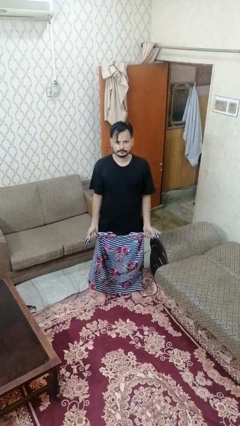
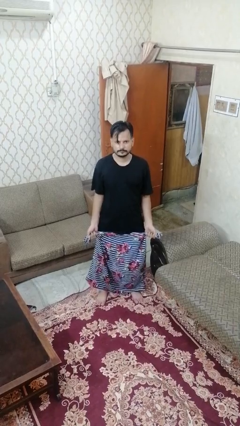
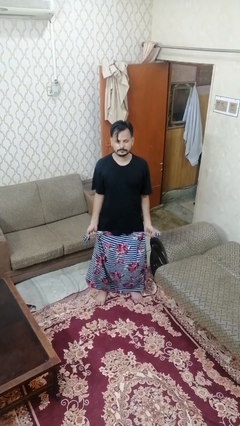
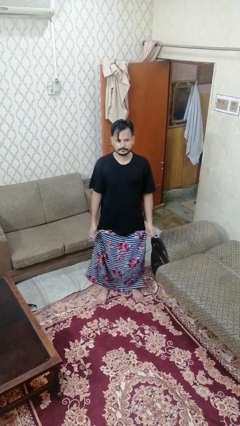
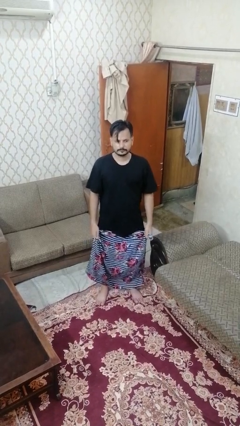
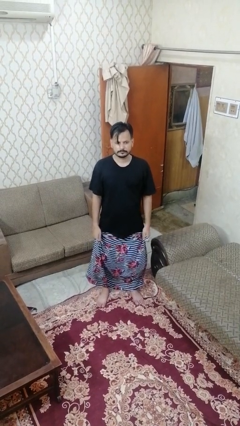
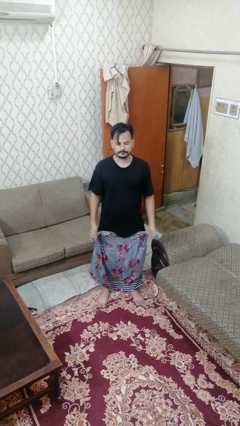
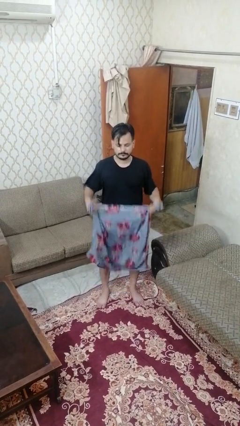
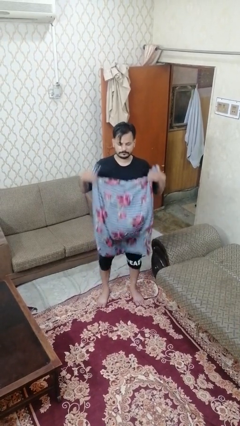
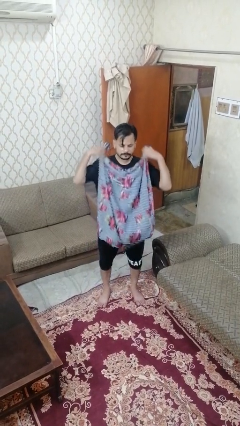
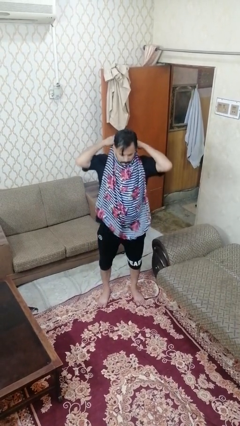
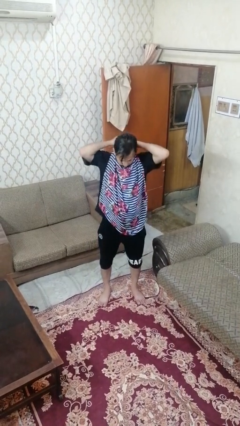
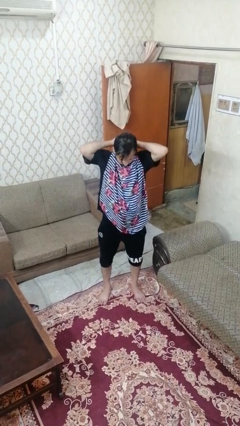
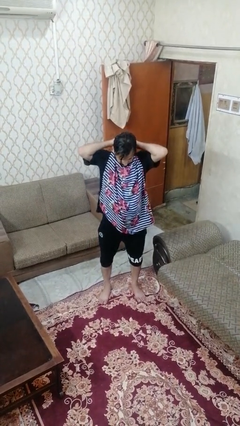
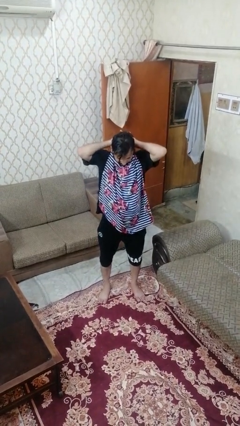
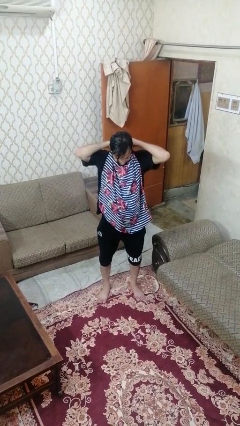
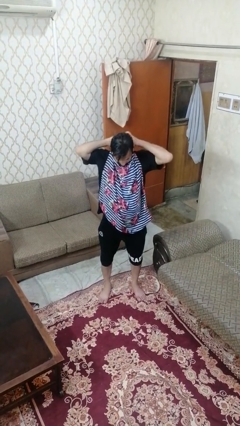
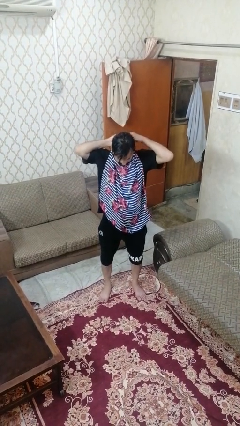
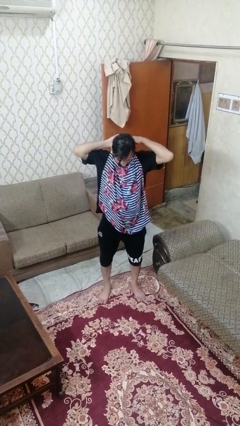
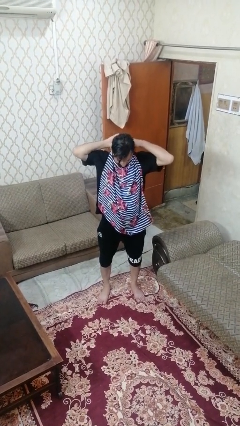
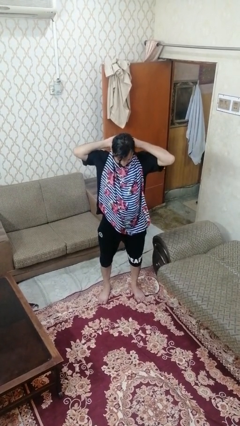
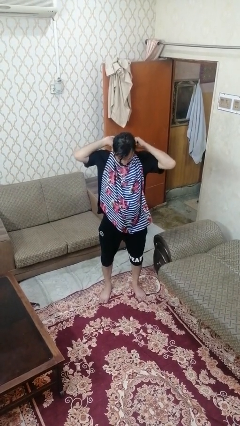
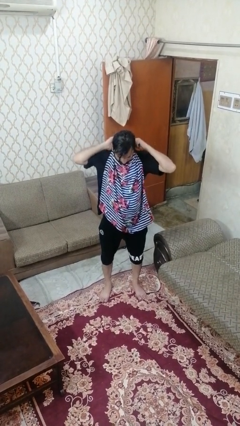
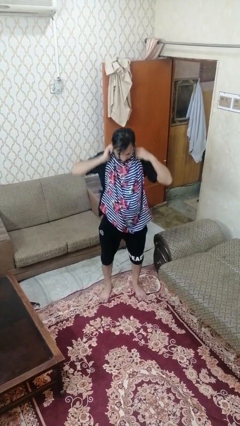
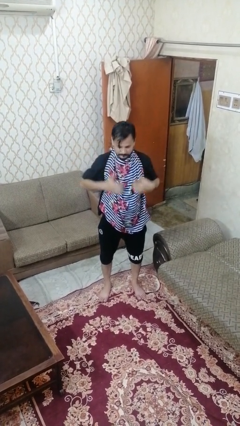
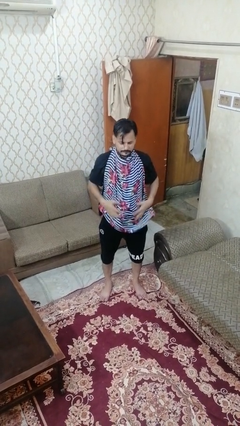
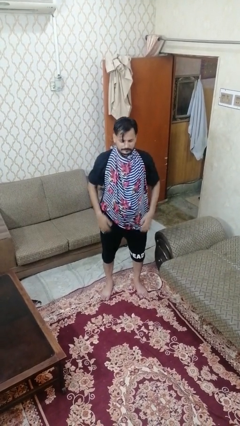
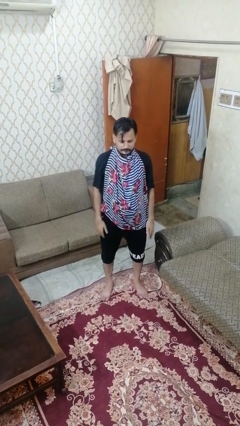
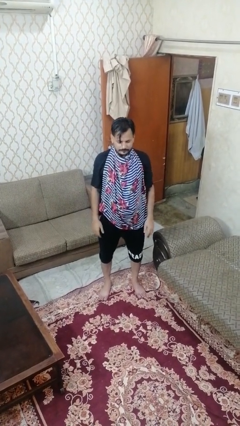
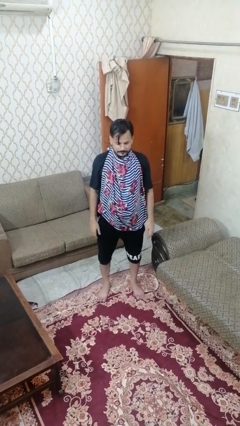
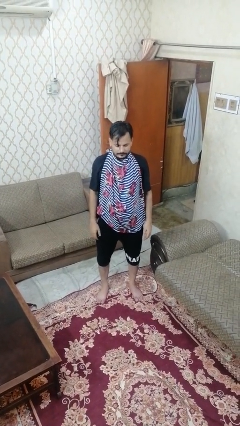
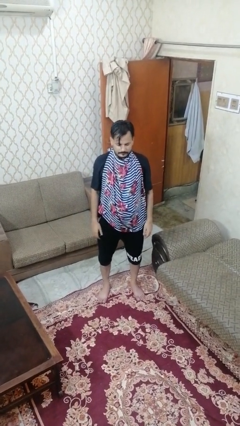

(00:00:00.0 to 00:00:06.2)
person puts on apron

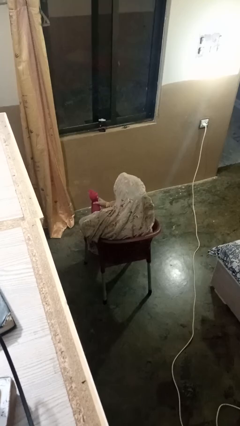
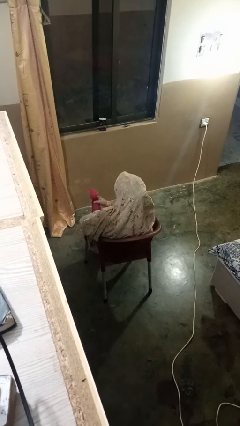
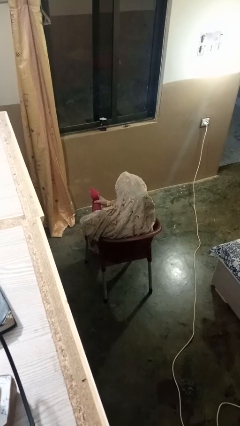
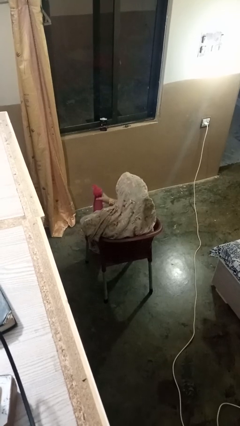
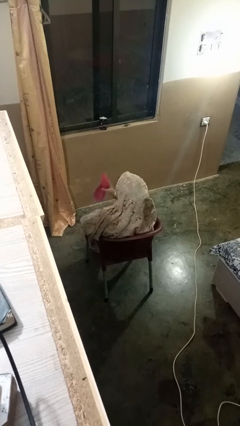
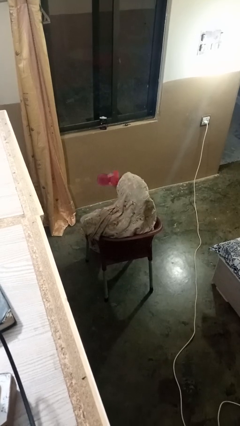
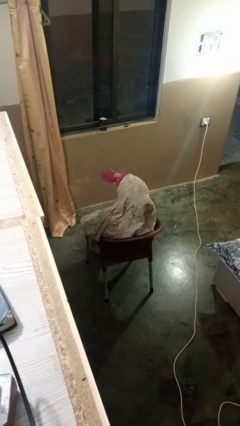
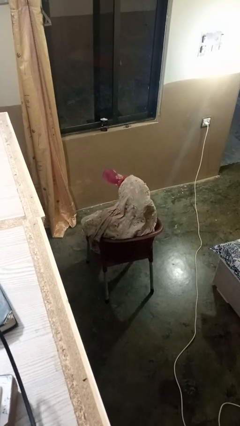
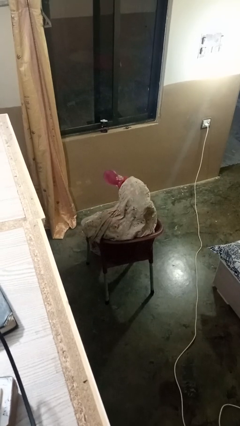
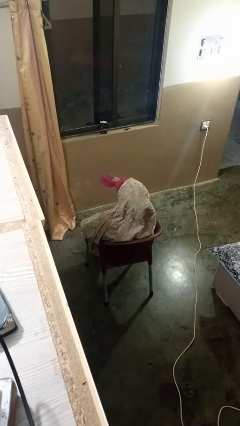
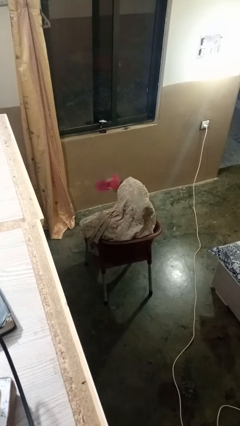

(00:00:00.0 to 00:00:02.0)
person drinks from bottle

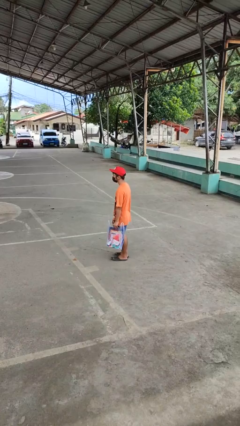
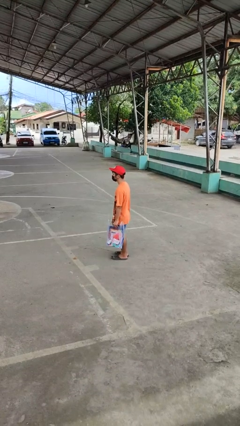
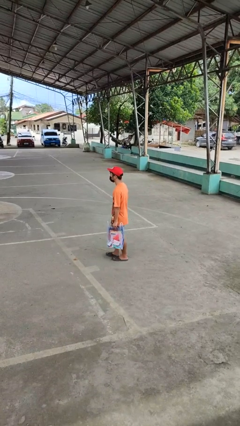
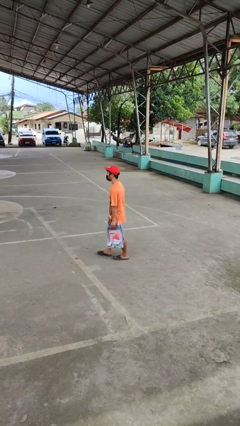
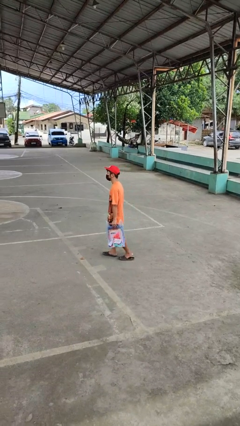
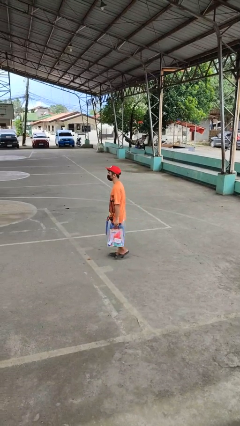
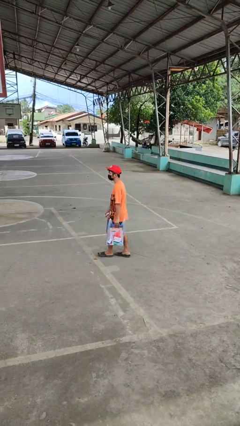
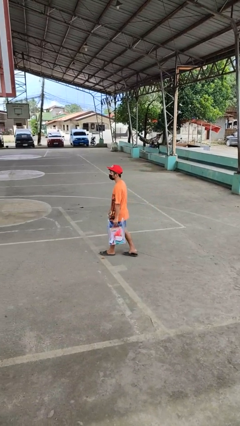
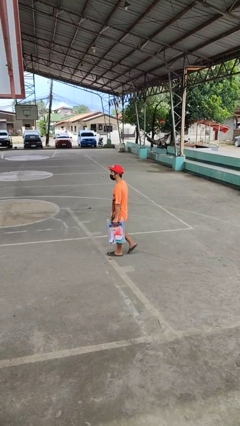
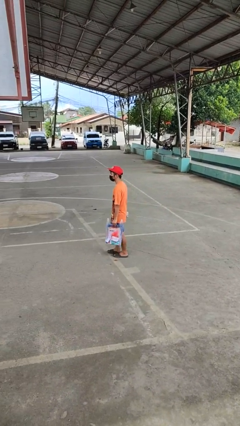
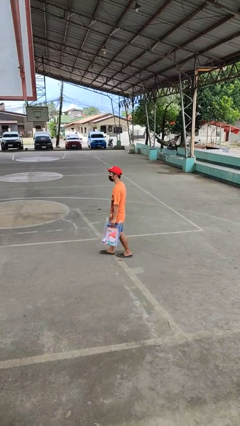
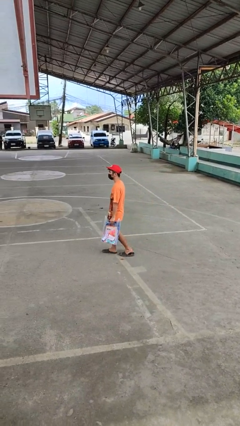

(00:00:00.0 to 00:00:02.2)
person carries groceries

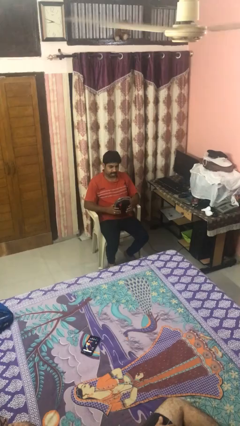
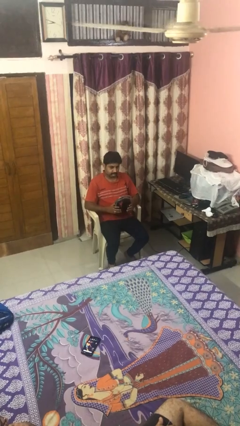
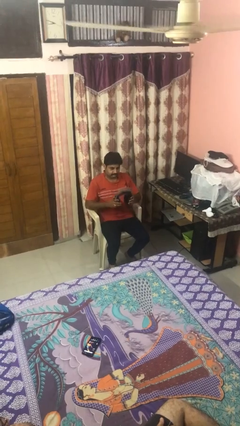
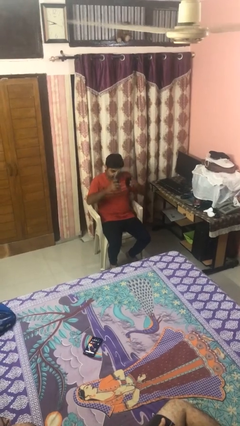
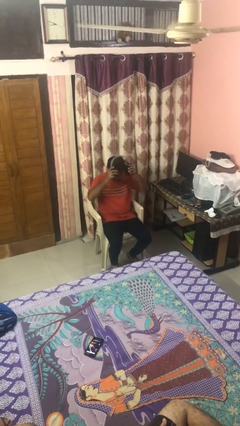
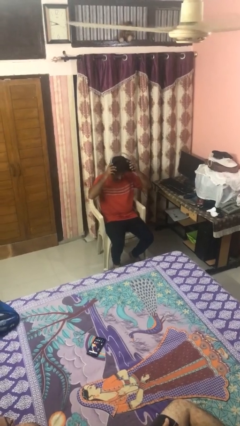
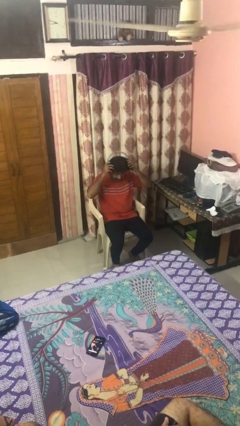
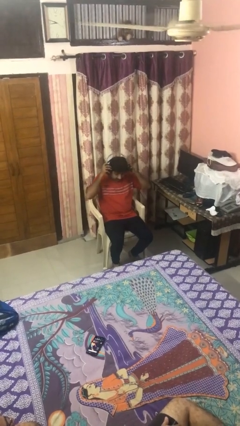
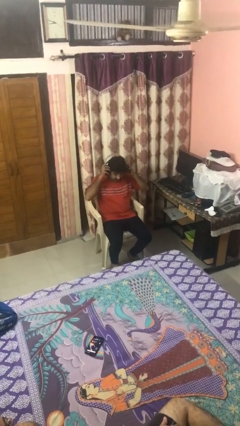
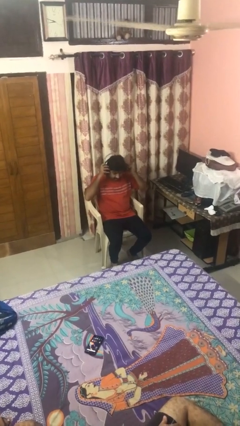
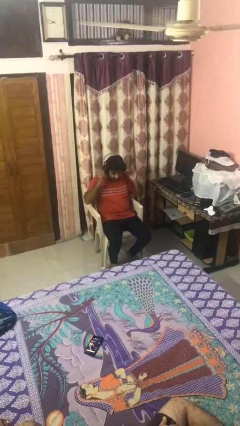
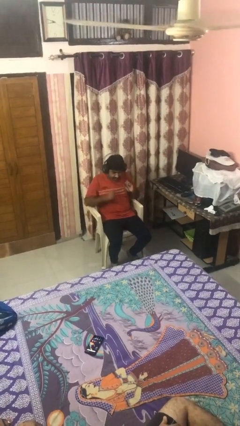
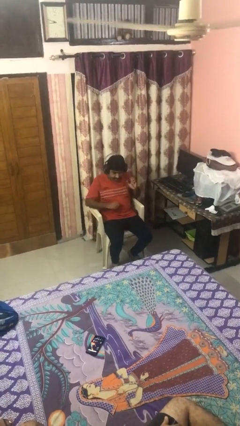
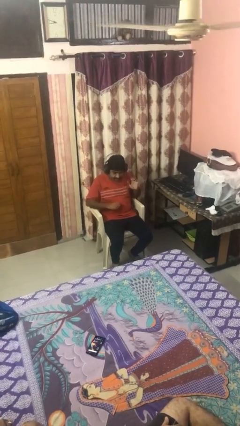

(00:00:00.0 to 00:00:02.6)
person puts on headphones

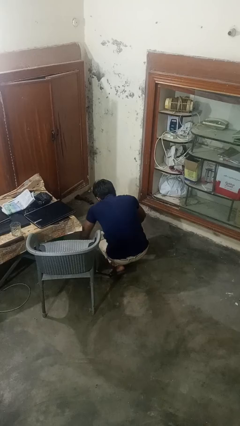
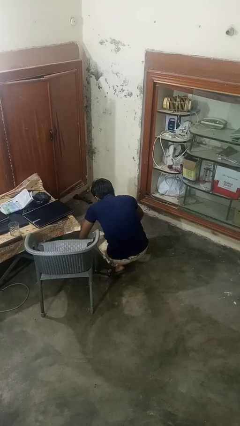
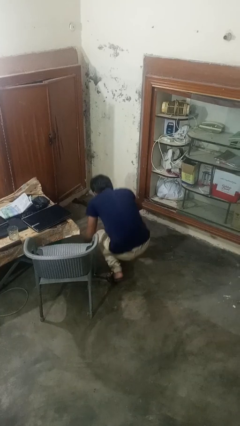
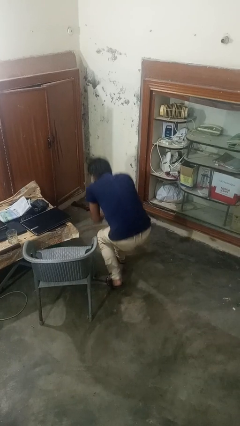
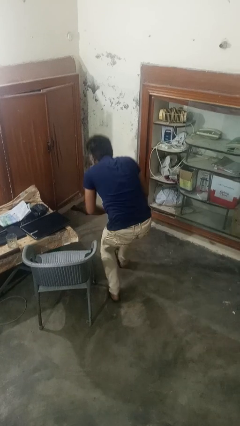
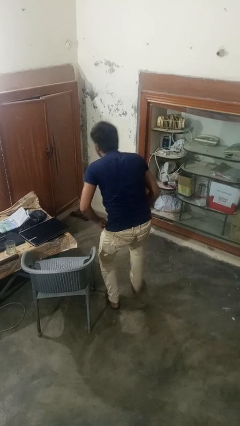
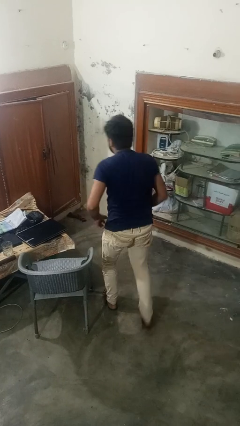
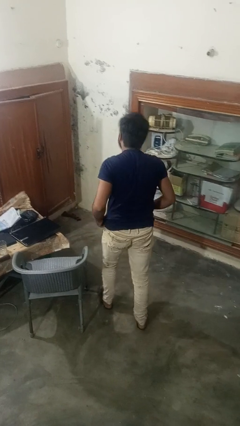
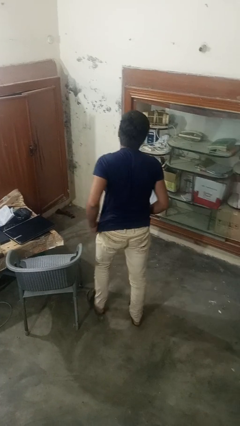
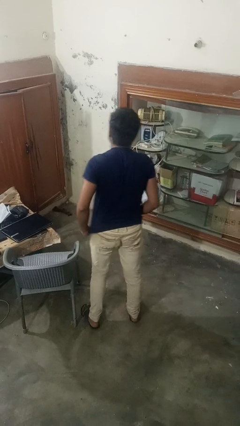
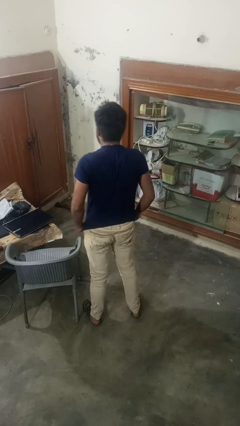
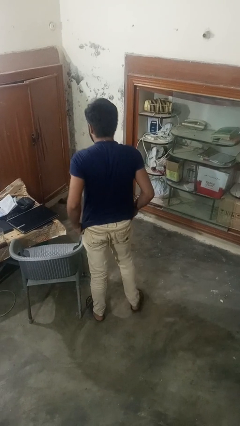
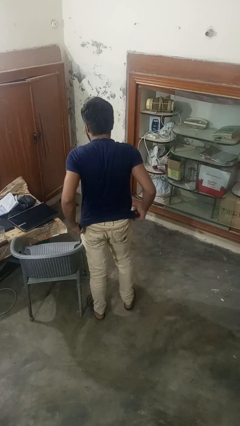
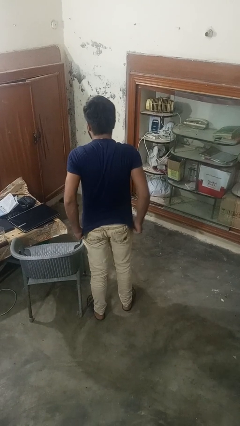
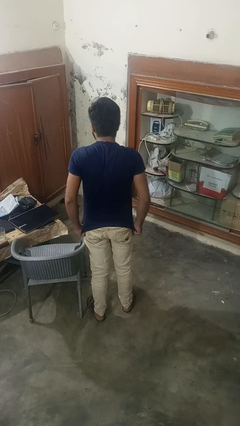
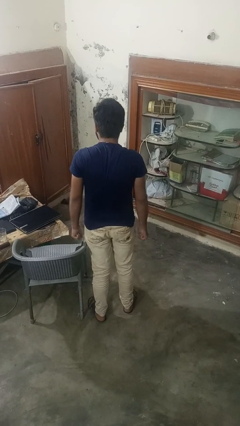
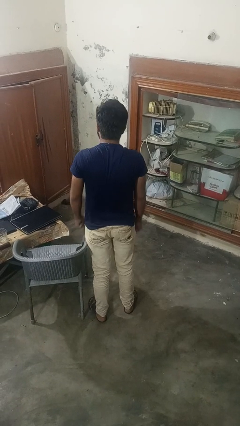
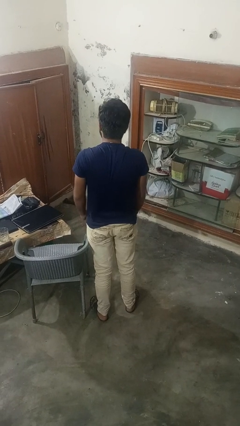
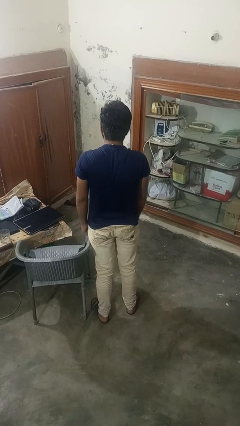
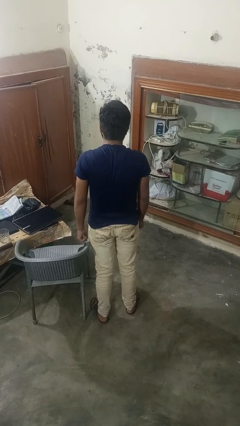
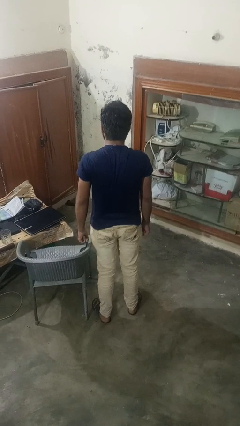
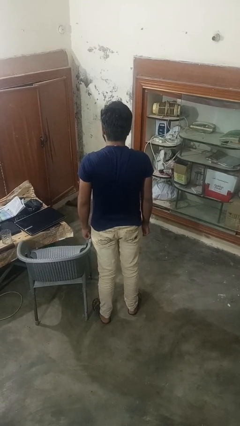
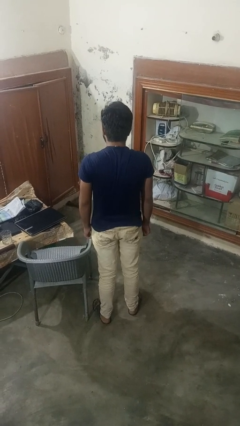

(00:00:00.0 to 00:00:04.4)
person stands up from floor

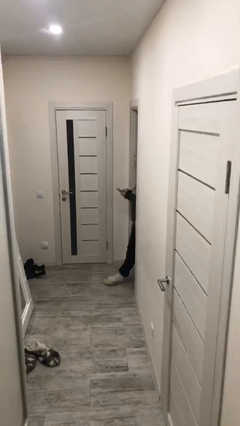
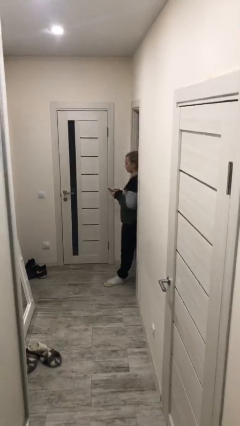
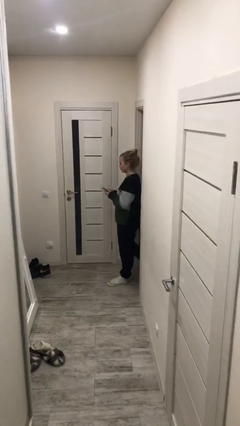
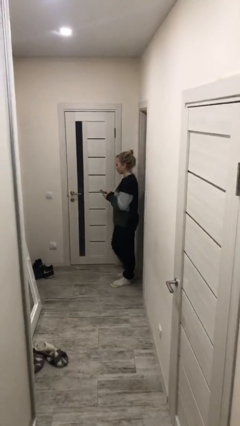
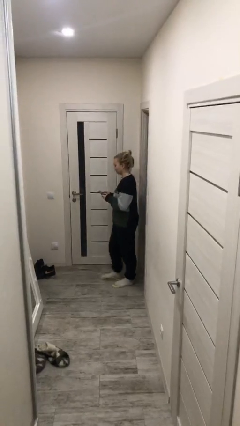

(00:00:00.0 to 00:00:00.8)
person enters scene through structure
